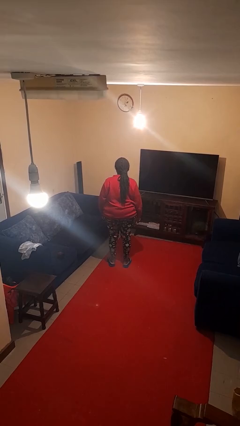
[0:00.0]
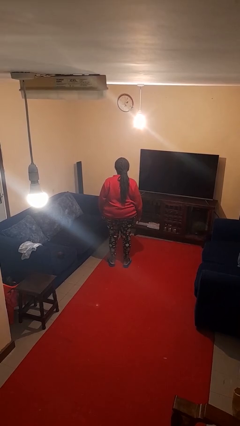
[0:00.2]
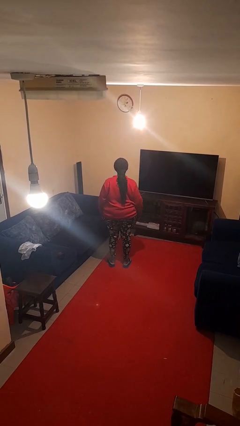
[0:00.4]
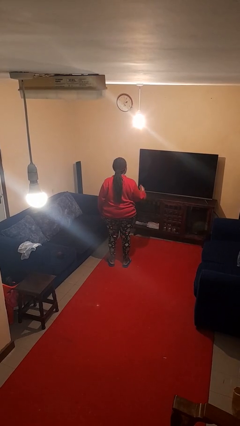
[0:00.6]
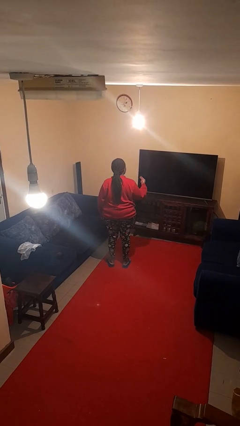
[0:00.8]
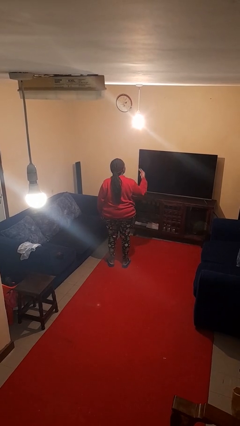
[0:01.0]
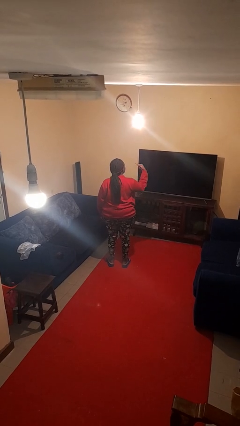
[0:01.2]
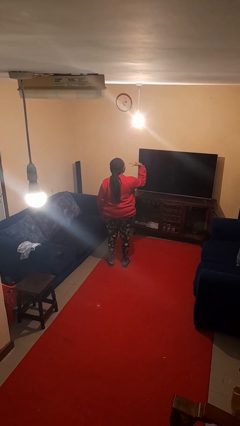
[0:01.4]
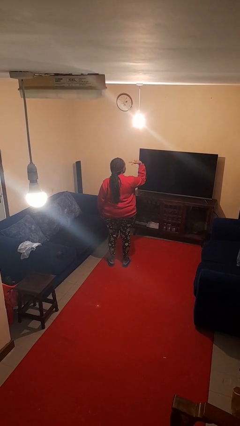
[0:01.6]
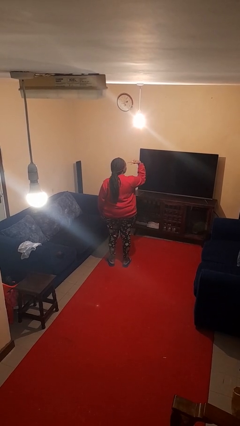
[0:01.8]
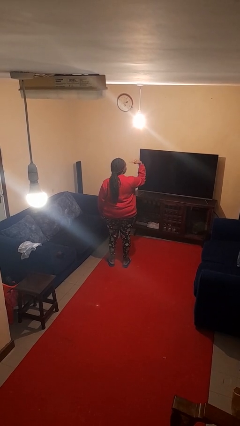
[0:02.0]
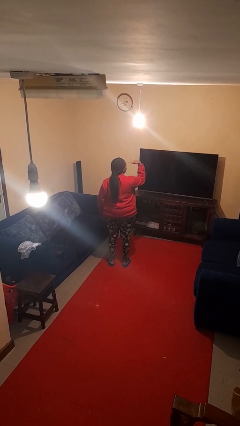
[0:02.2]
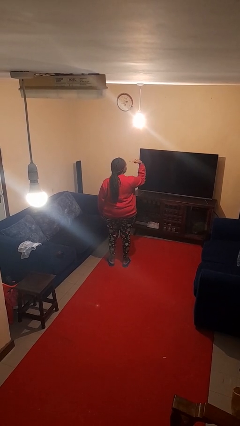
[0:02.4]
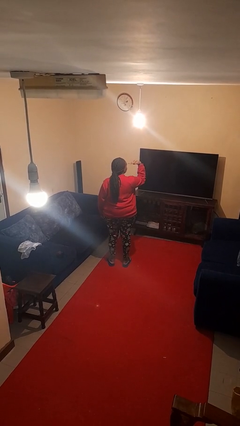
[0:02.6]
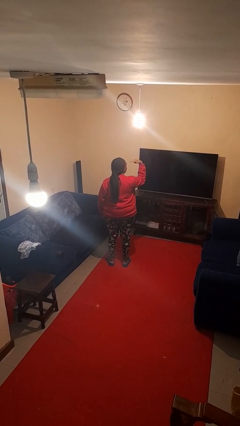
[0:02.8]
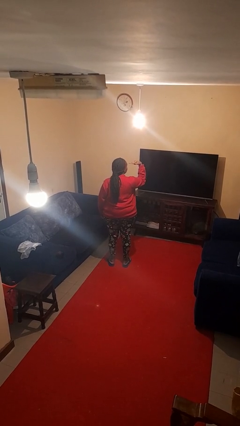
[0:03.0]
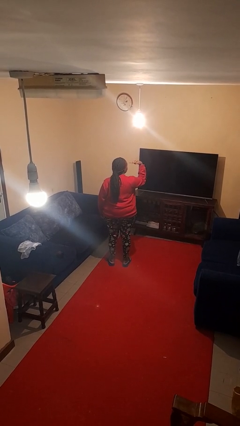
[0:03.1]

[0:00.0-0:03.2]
person gestures watch closely

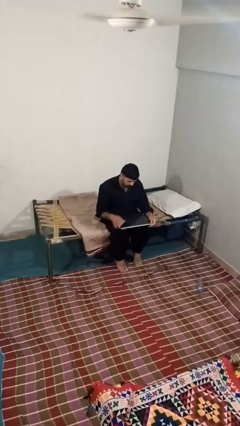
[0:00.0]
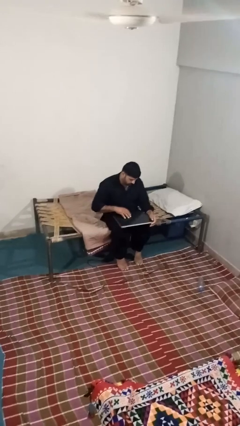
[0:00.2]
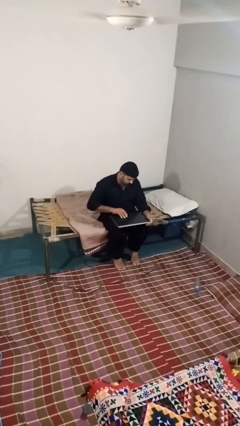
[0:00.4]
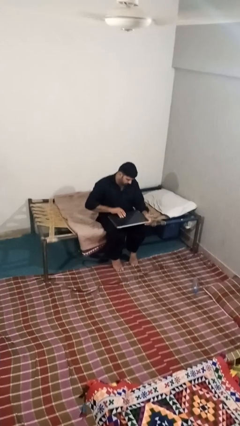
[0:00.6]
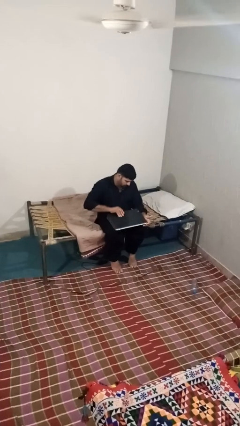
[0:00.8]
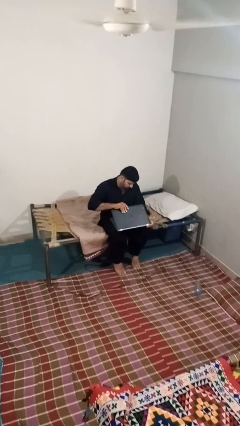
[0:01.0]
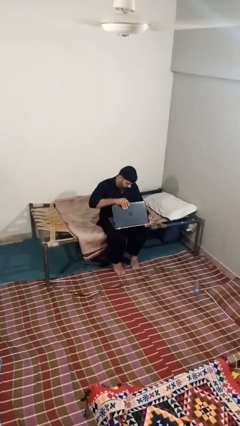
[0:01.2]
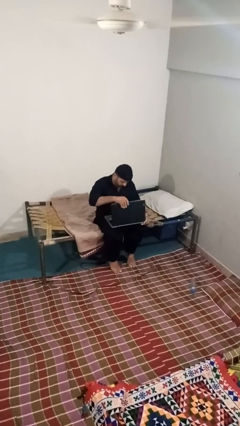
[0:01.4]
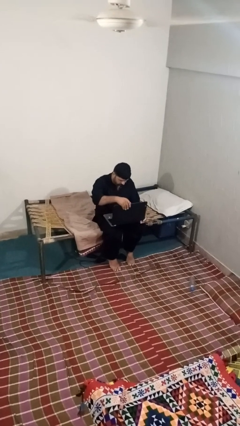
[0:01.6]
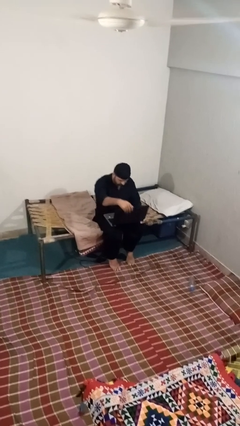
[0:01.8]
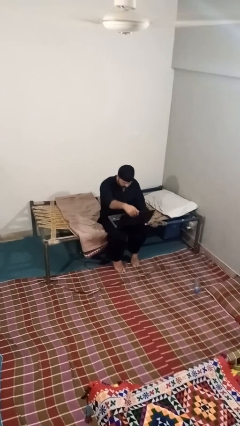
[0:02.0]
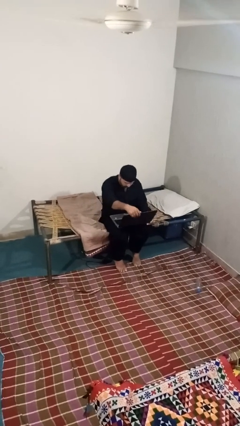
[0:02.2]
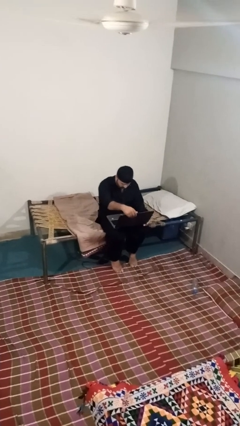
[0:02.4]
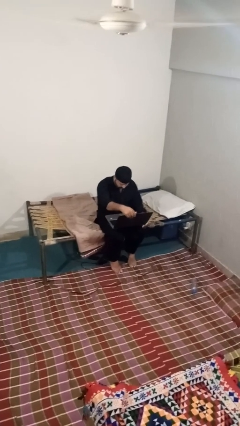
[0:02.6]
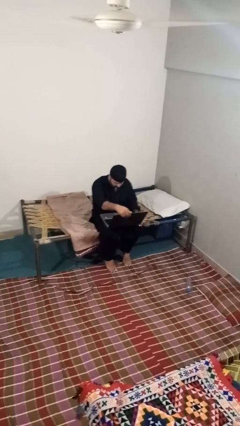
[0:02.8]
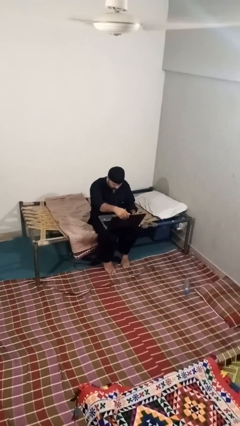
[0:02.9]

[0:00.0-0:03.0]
person opens laptop

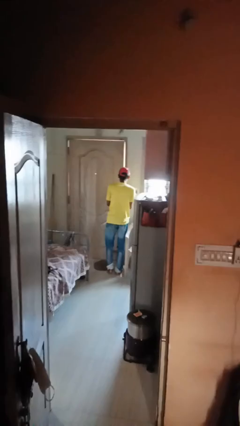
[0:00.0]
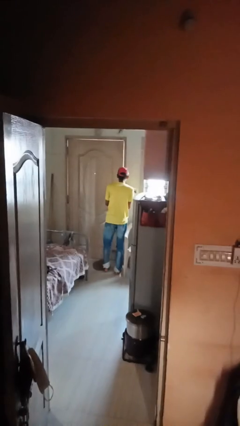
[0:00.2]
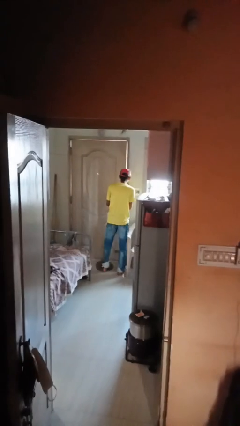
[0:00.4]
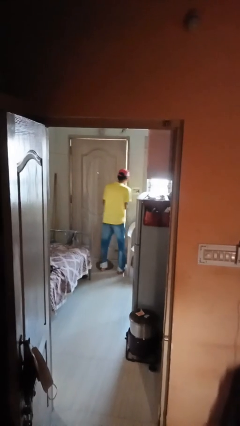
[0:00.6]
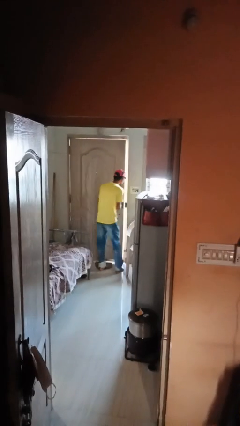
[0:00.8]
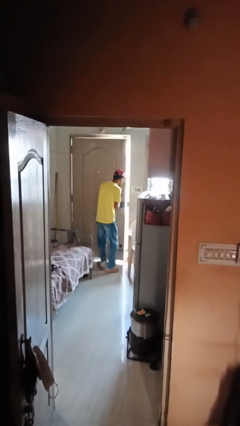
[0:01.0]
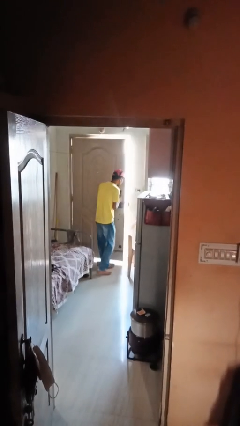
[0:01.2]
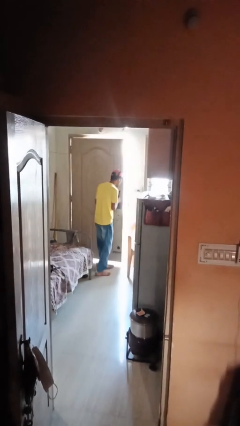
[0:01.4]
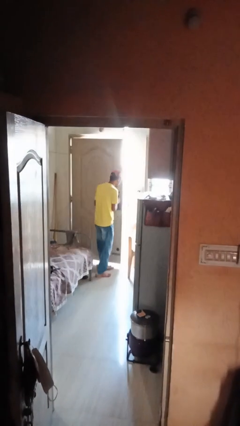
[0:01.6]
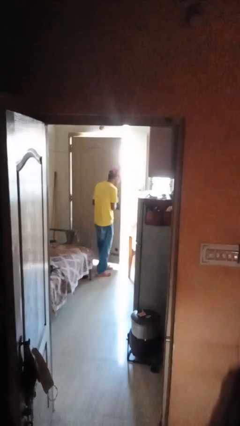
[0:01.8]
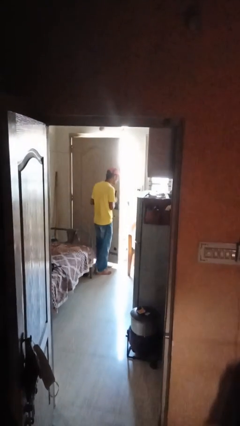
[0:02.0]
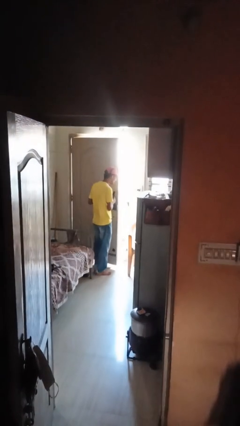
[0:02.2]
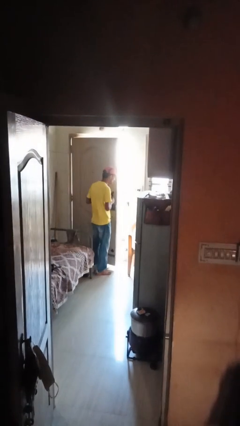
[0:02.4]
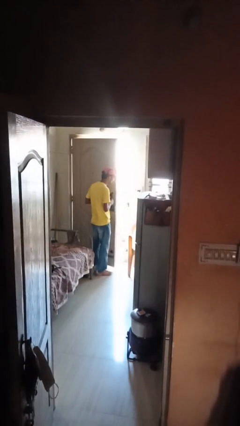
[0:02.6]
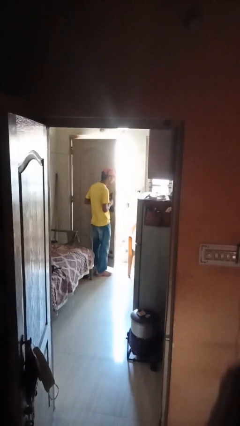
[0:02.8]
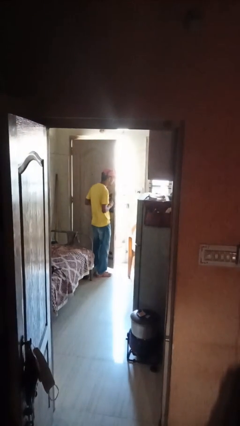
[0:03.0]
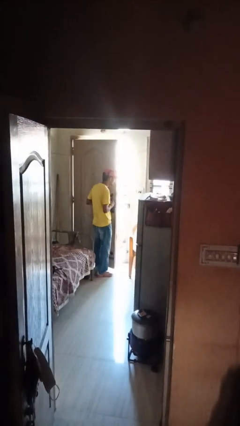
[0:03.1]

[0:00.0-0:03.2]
person opens facility door

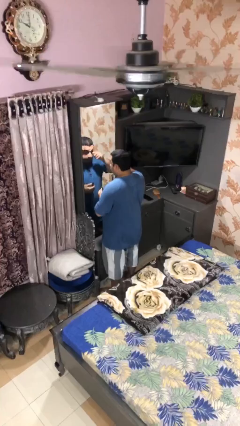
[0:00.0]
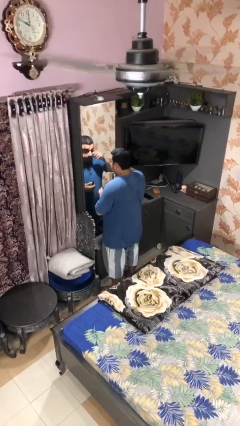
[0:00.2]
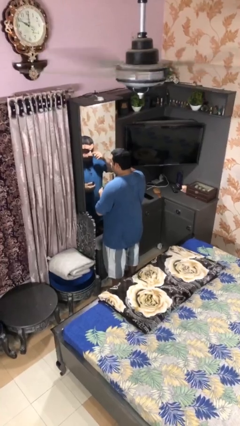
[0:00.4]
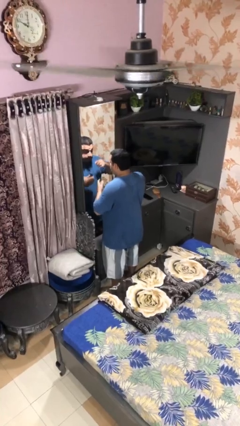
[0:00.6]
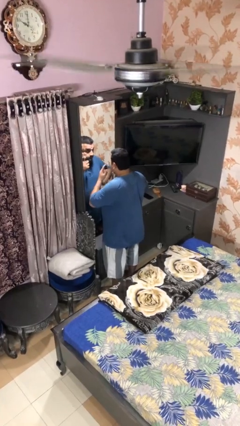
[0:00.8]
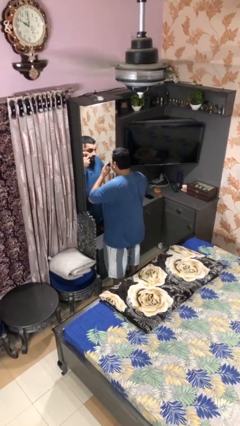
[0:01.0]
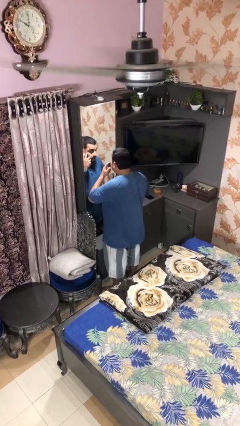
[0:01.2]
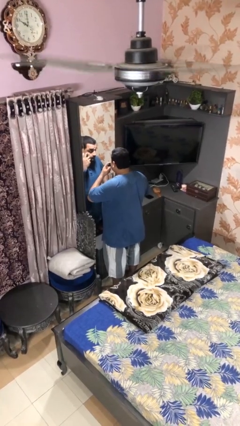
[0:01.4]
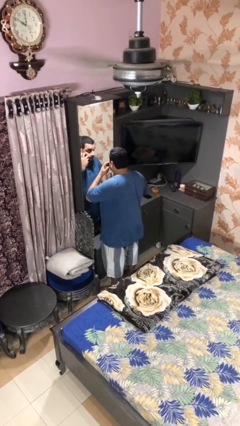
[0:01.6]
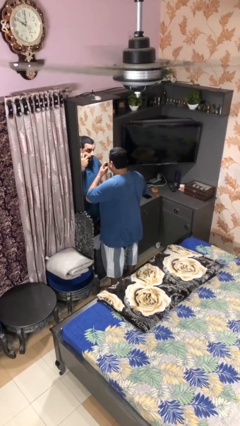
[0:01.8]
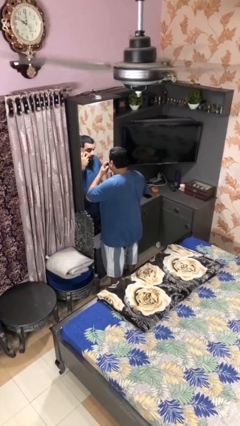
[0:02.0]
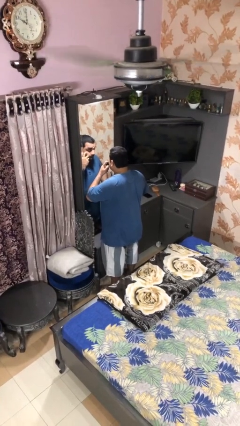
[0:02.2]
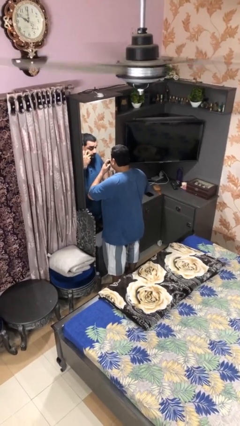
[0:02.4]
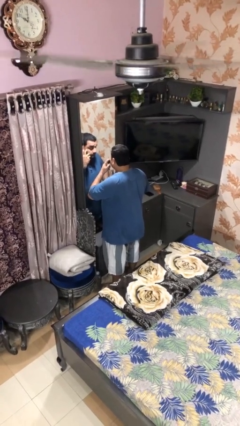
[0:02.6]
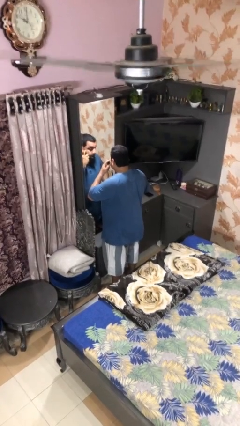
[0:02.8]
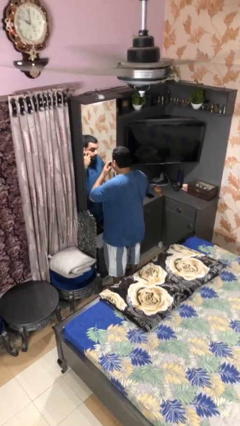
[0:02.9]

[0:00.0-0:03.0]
person applies foundation makeup

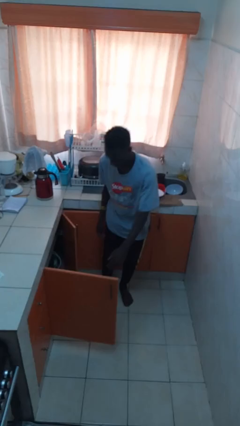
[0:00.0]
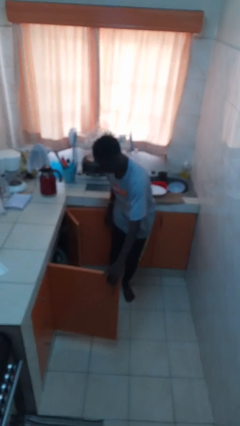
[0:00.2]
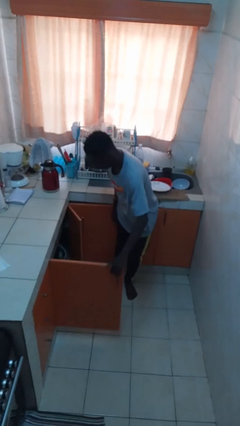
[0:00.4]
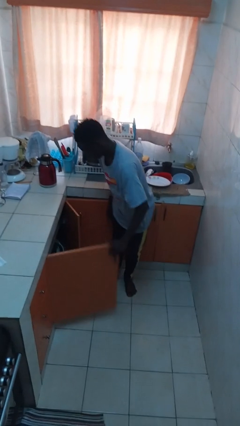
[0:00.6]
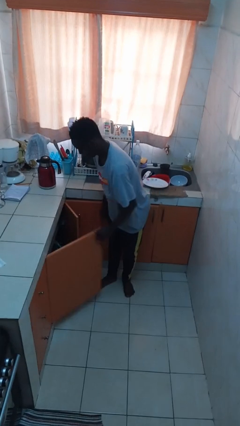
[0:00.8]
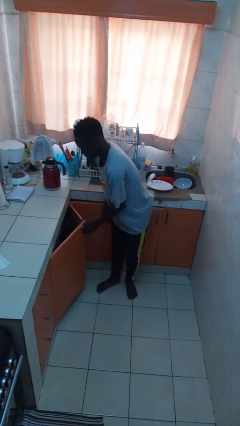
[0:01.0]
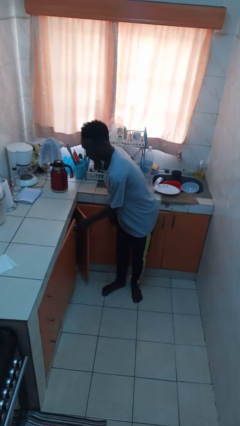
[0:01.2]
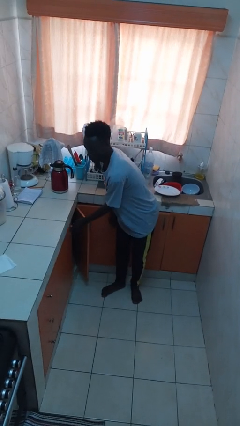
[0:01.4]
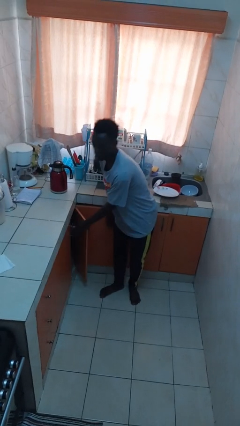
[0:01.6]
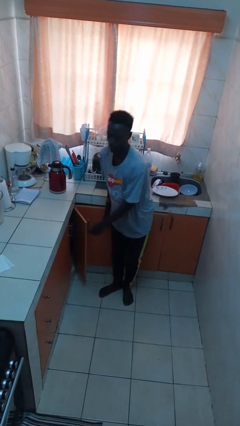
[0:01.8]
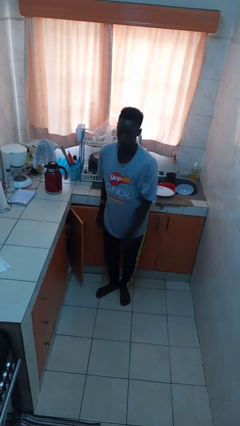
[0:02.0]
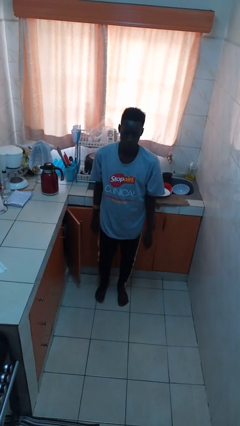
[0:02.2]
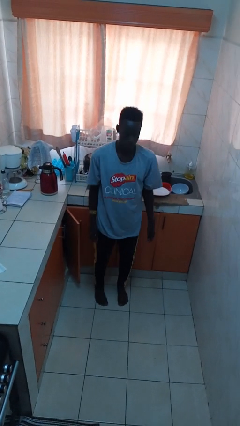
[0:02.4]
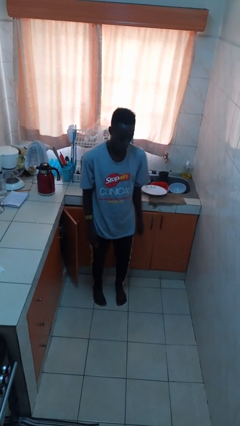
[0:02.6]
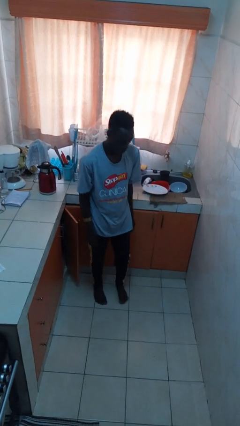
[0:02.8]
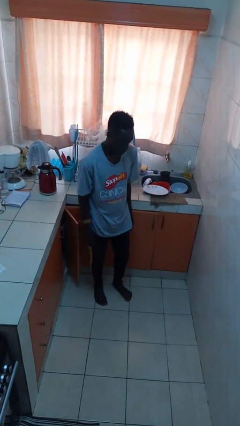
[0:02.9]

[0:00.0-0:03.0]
person closes cabinet

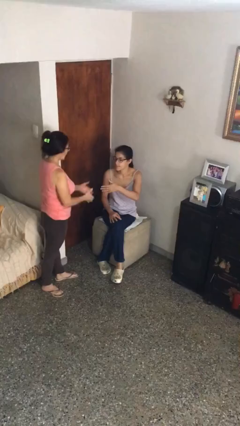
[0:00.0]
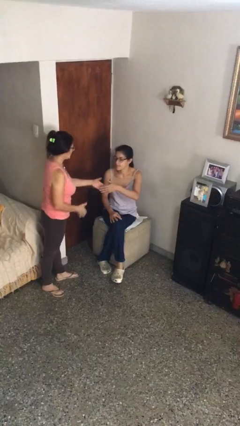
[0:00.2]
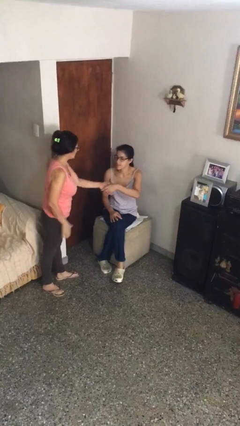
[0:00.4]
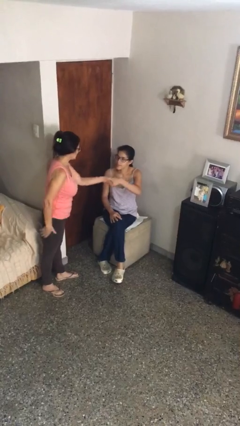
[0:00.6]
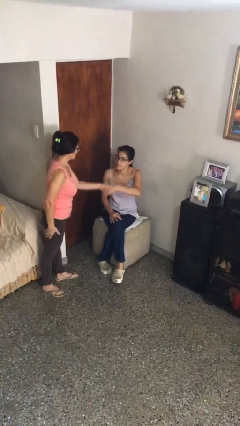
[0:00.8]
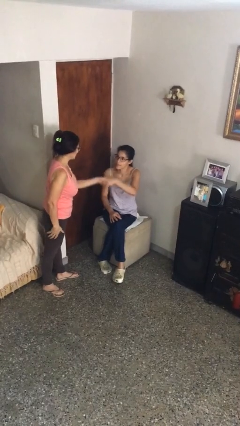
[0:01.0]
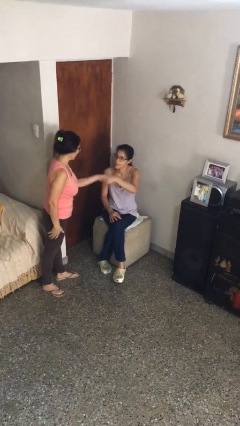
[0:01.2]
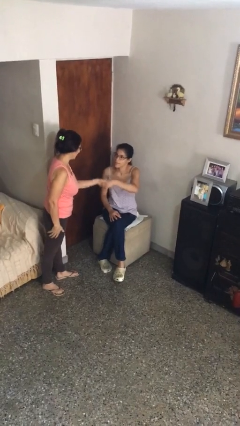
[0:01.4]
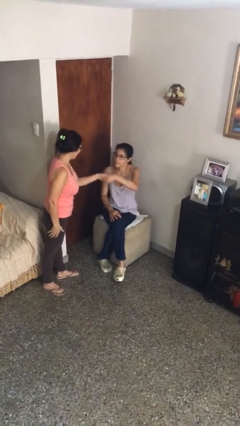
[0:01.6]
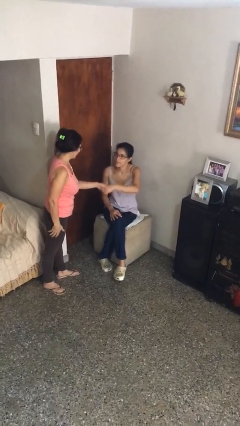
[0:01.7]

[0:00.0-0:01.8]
person shakes hand
